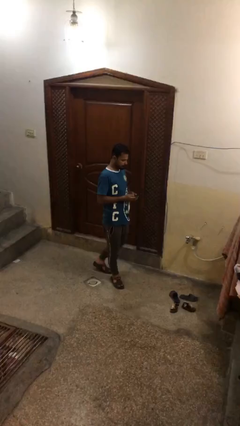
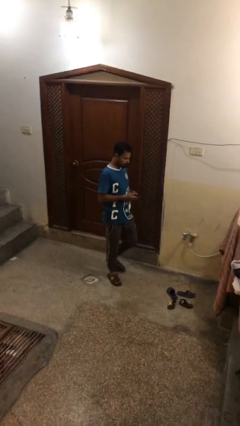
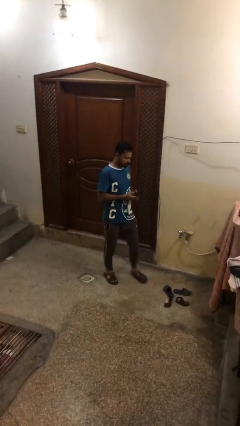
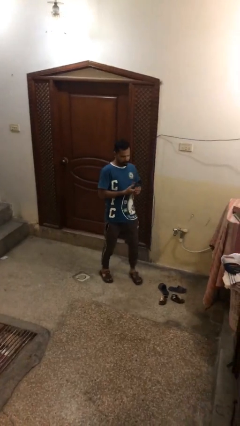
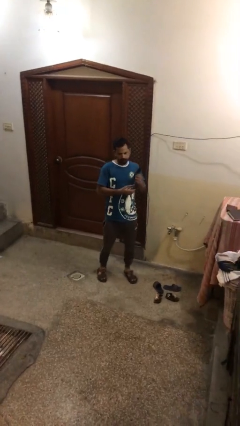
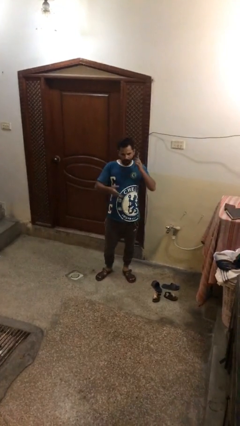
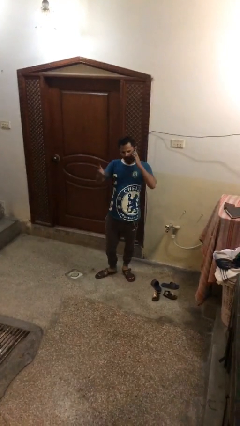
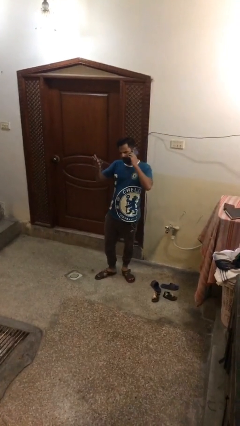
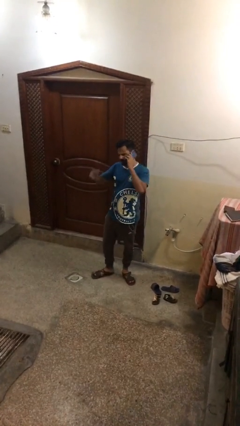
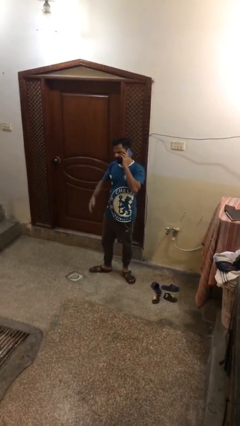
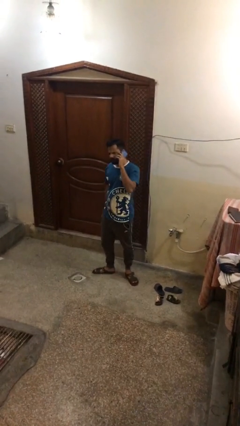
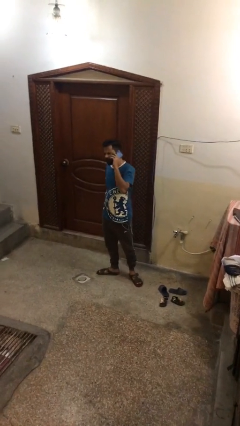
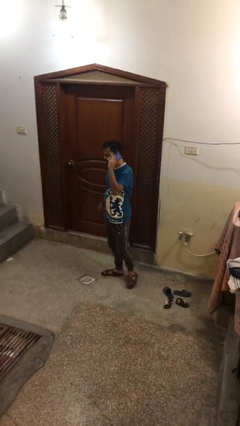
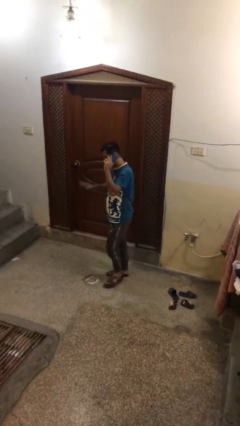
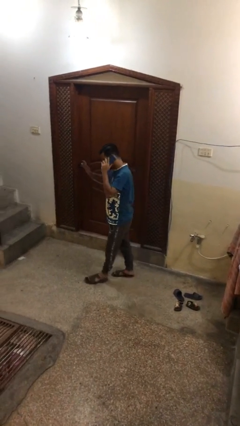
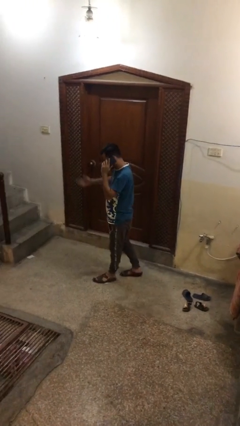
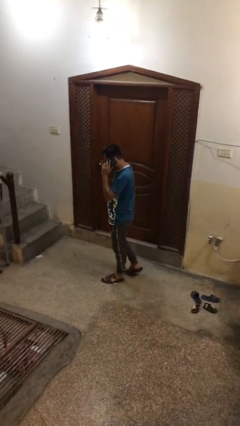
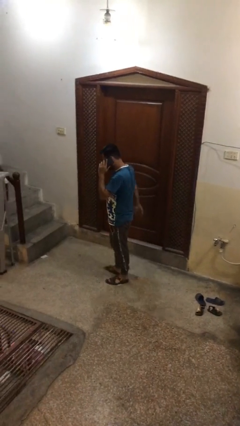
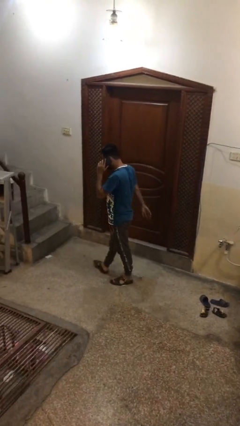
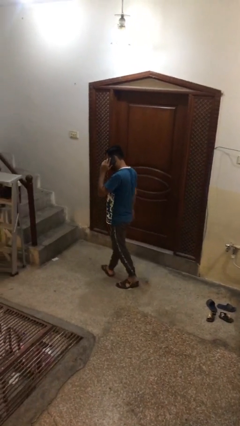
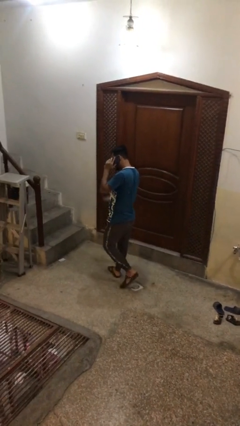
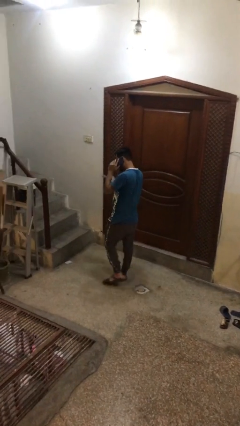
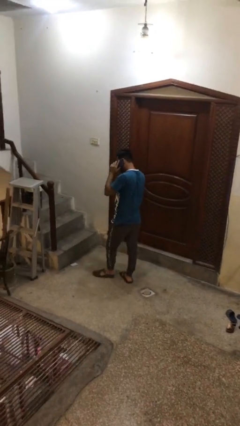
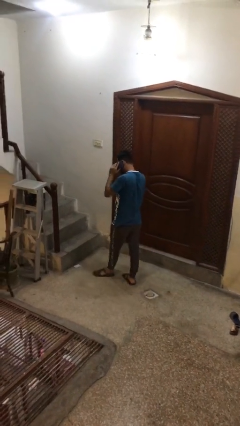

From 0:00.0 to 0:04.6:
person talks on phone

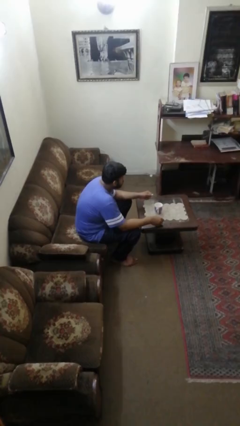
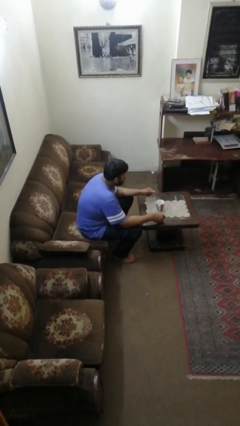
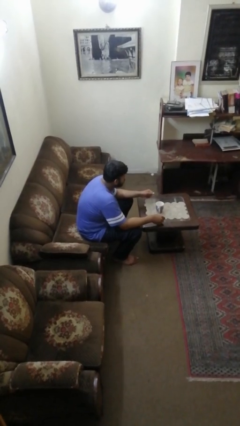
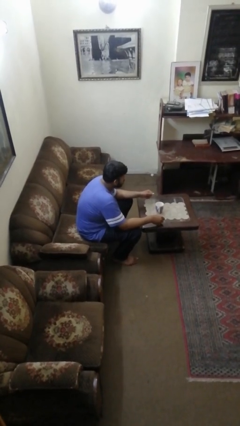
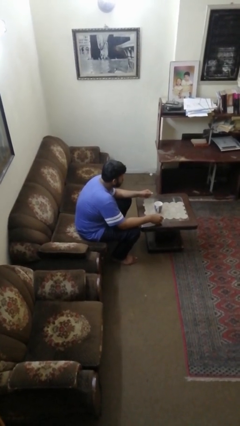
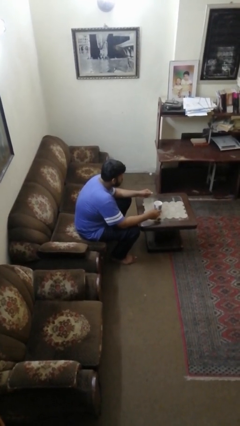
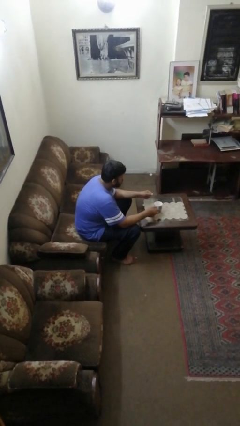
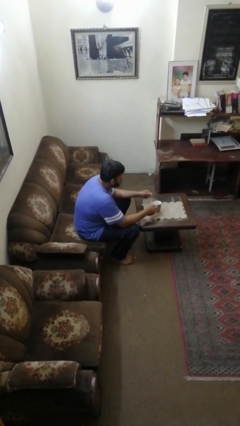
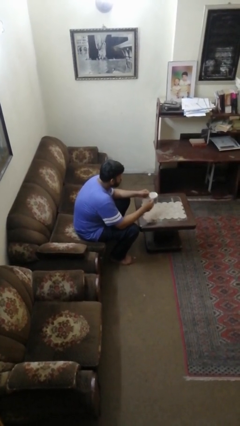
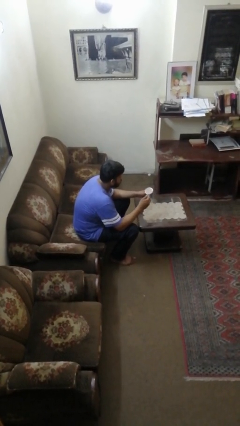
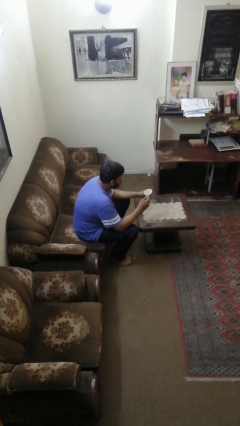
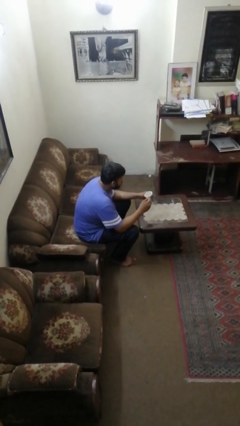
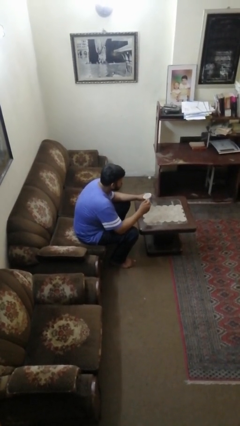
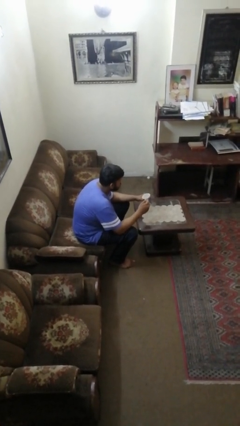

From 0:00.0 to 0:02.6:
person picks up object from table

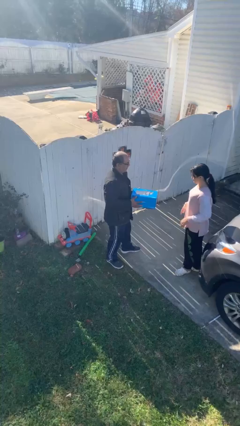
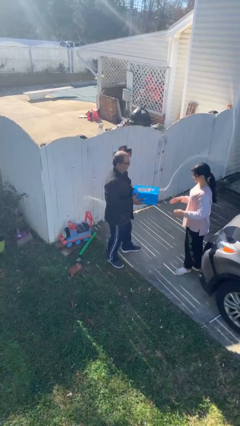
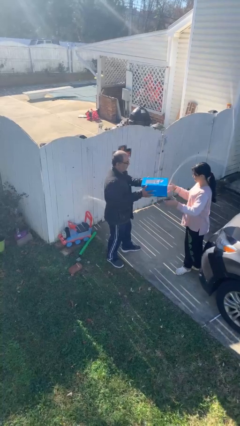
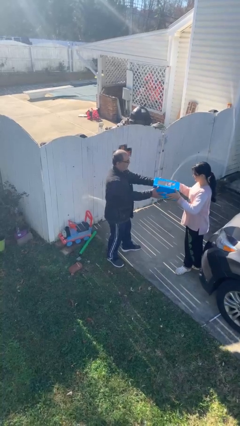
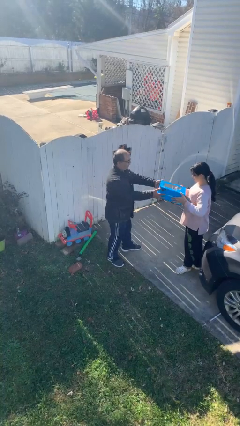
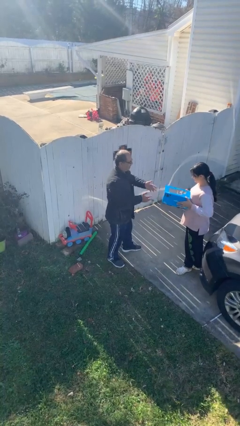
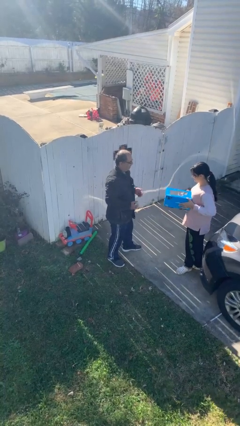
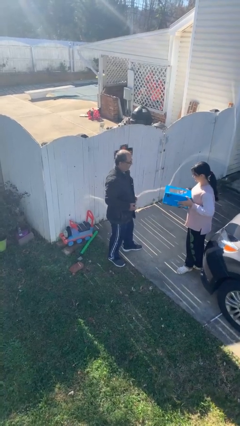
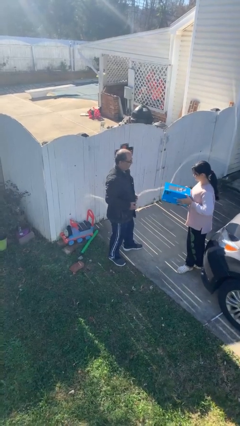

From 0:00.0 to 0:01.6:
person transfers object to person

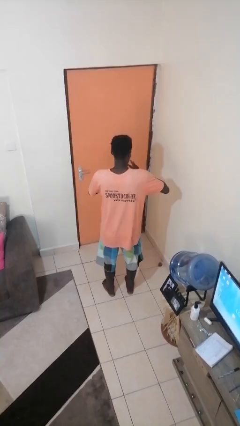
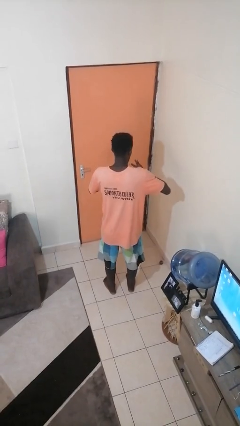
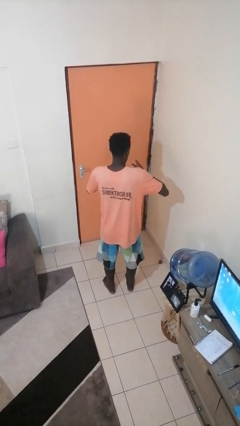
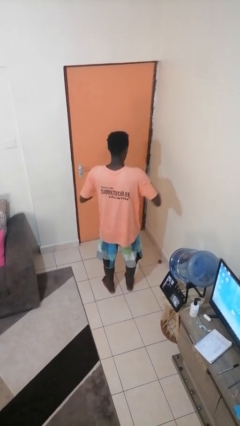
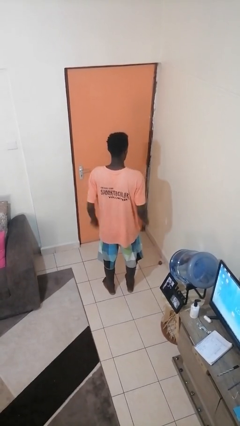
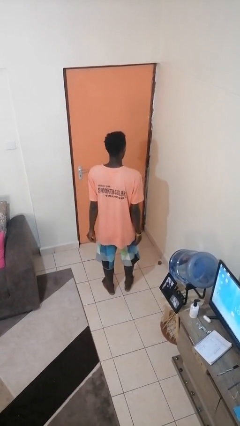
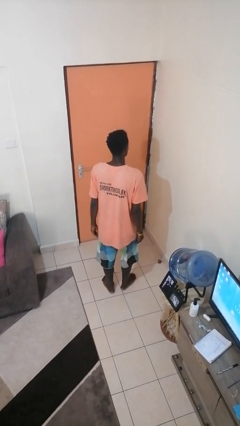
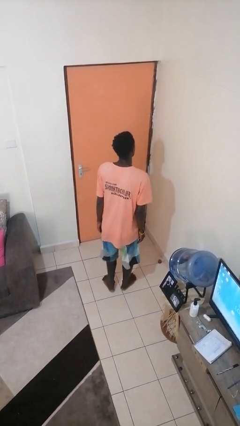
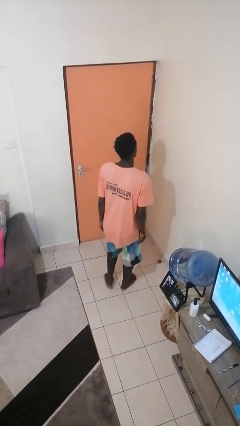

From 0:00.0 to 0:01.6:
person takes off ring

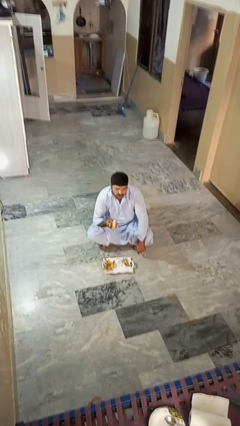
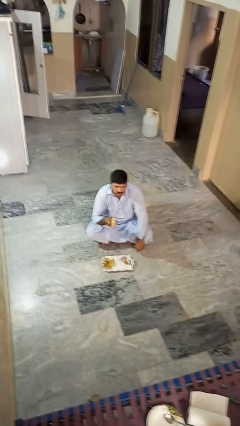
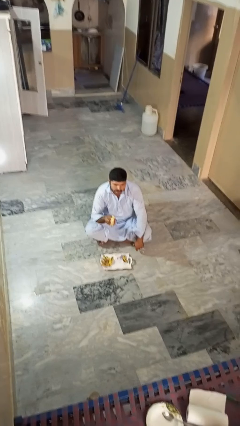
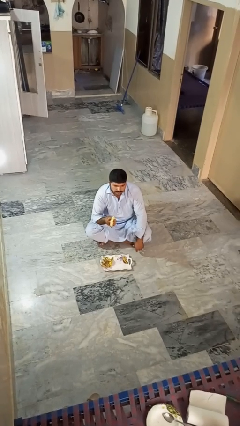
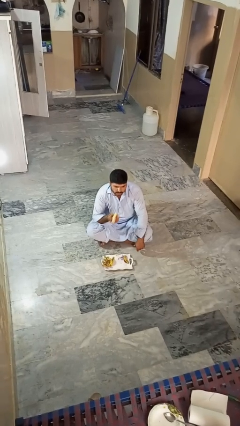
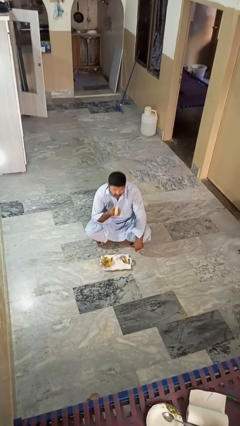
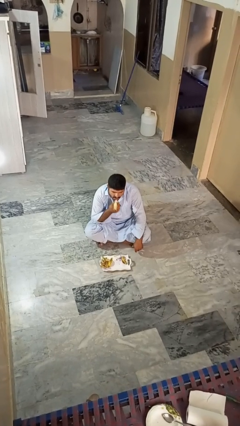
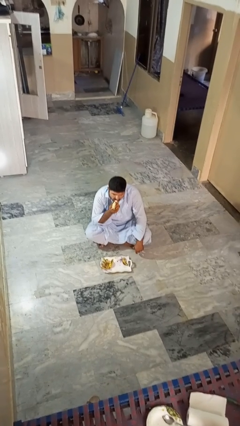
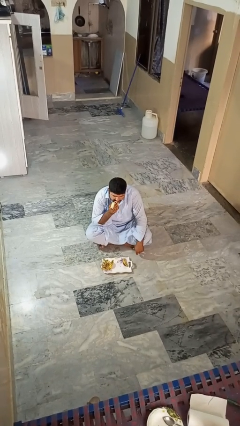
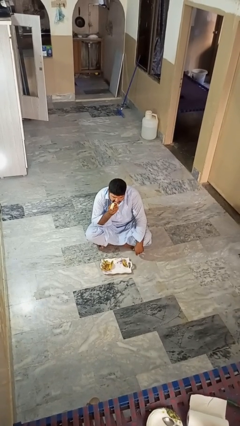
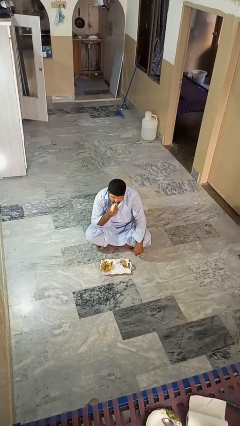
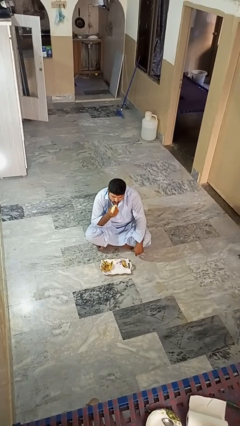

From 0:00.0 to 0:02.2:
person eats banana

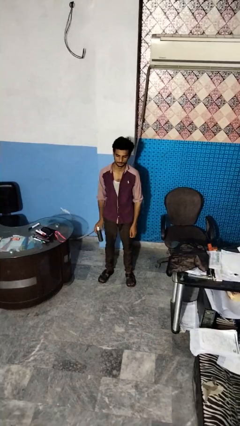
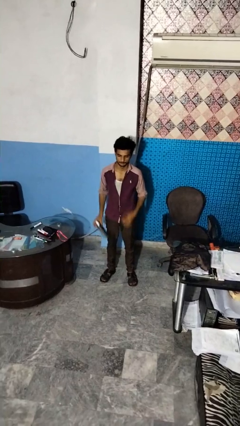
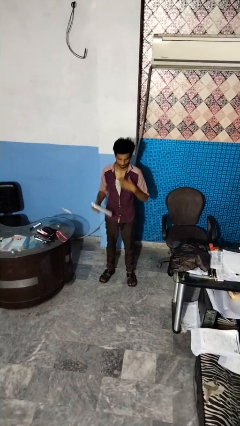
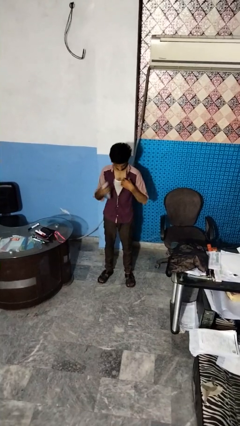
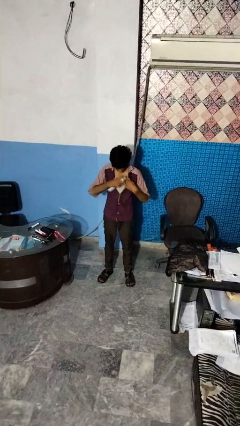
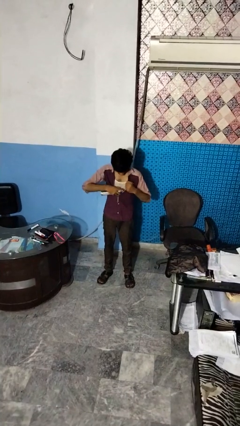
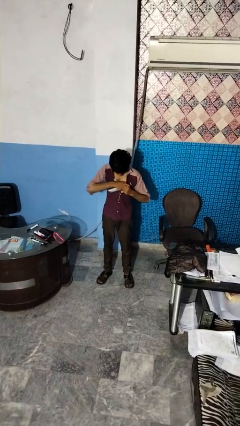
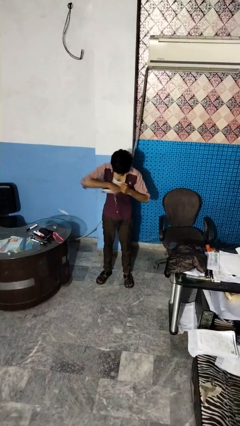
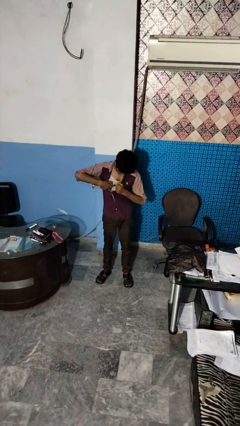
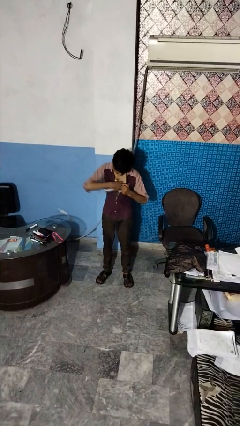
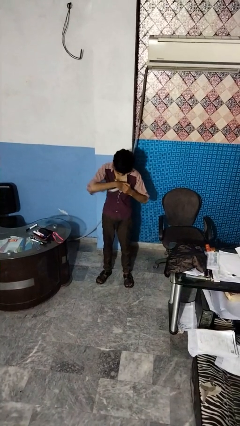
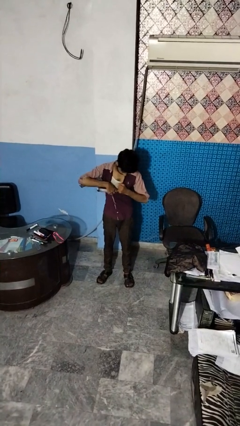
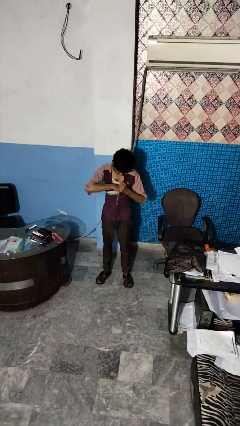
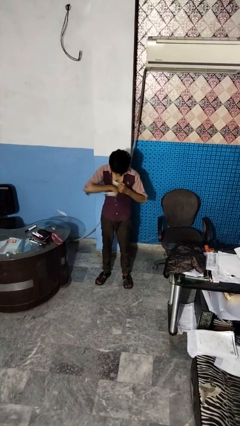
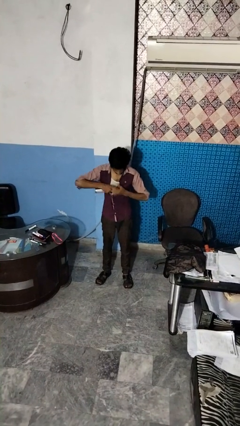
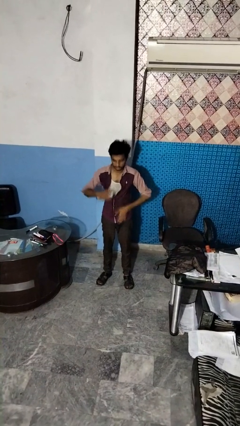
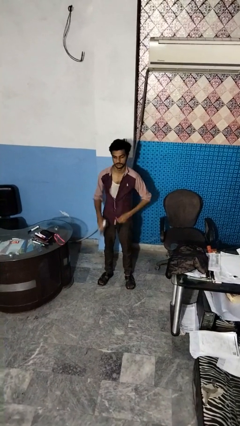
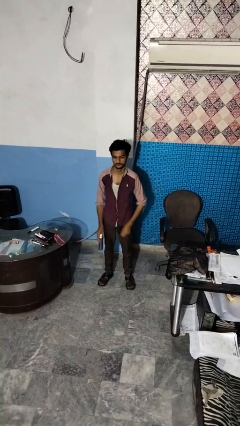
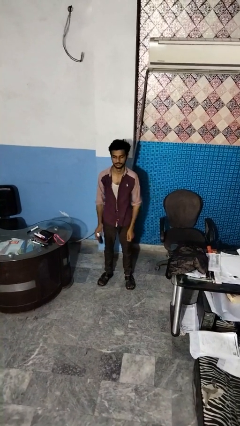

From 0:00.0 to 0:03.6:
person applies deodorant

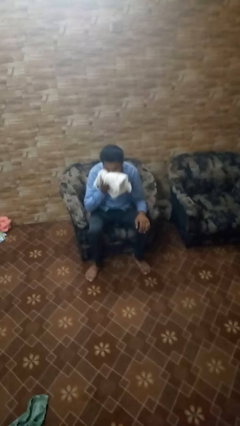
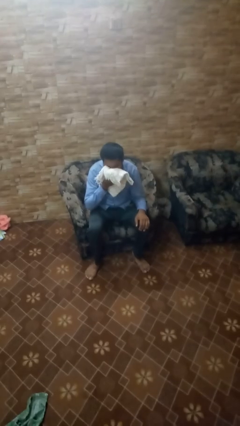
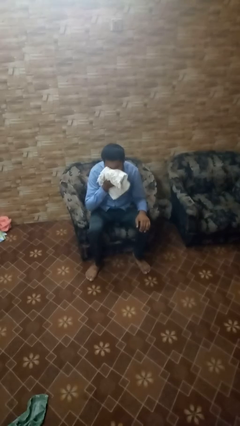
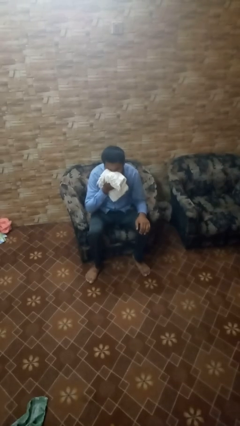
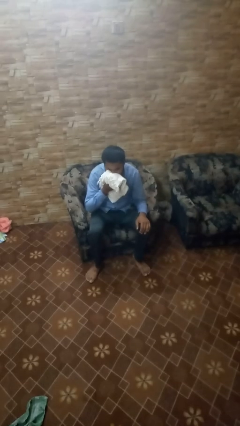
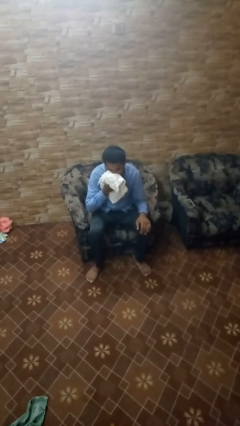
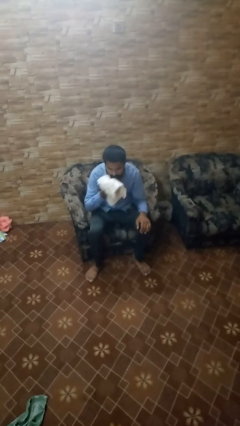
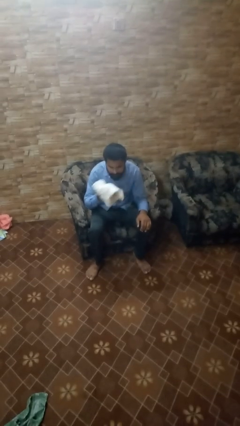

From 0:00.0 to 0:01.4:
person wipes mouth with napkin
